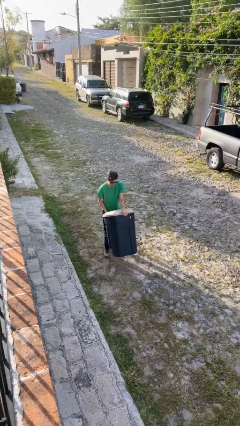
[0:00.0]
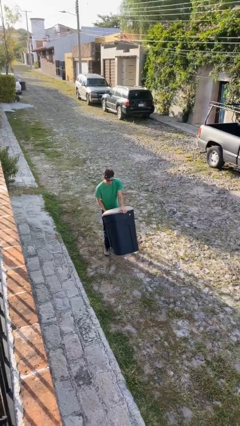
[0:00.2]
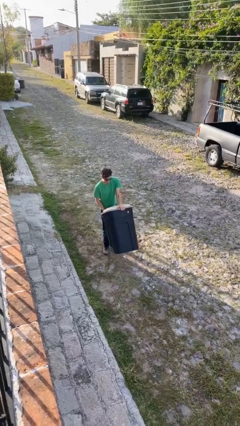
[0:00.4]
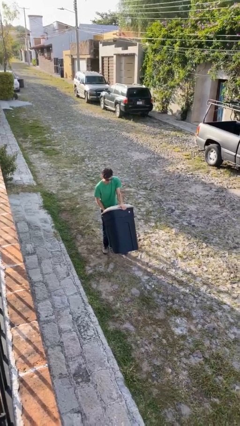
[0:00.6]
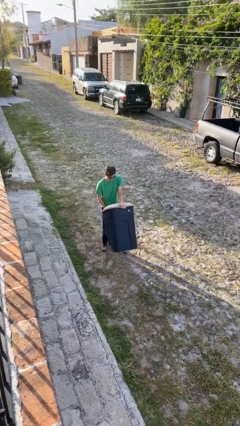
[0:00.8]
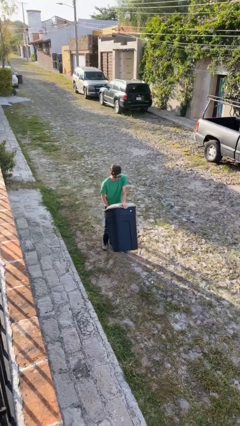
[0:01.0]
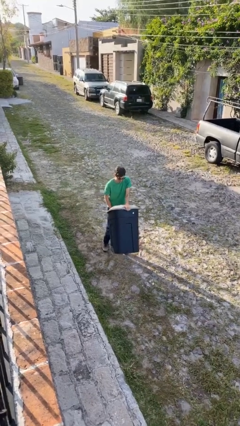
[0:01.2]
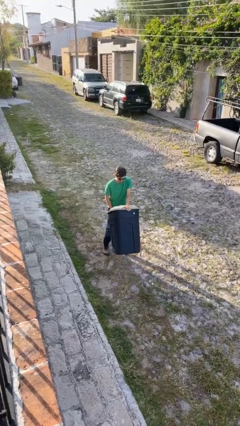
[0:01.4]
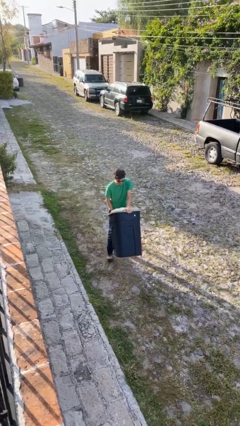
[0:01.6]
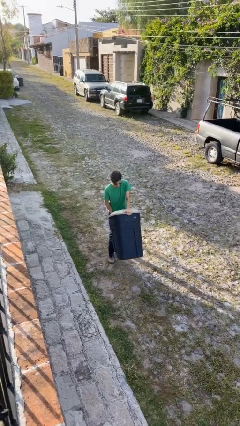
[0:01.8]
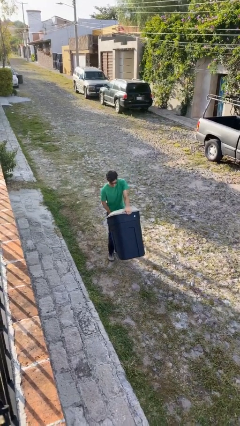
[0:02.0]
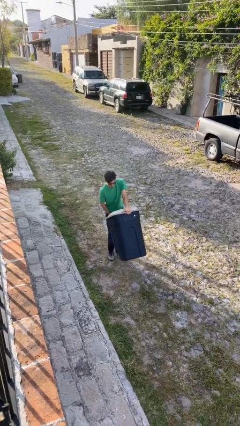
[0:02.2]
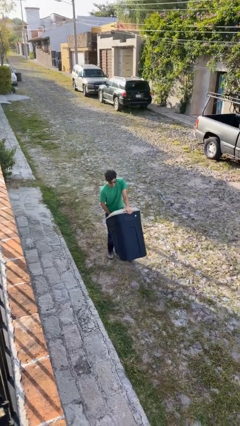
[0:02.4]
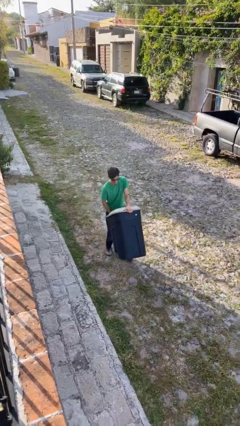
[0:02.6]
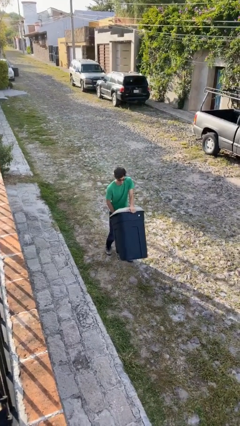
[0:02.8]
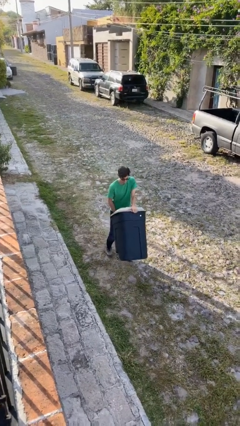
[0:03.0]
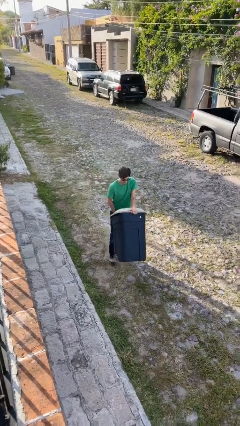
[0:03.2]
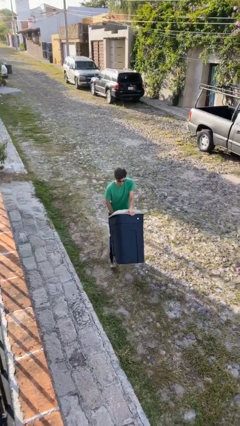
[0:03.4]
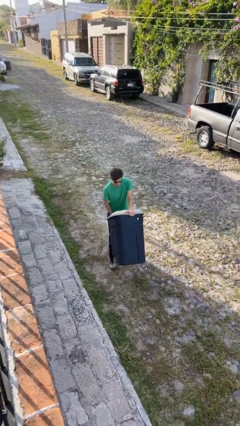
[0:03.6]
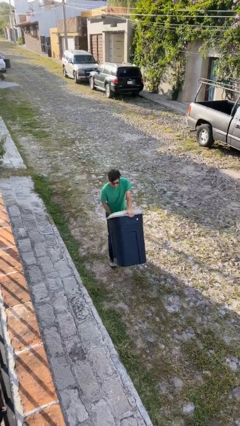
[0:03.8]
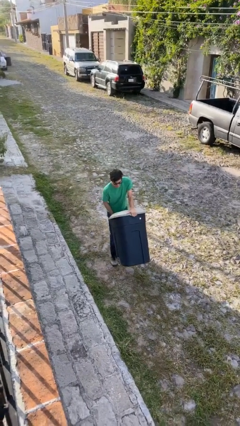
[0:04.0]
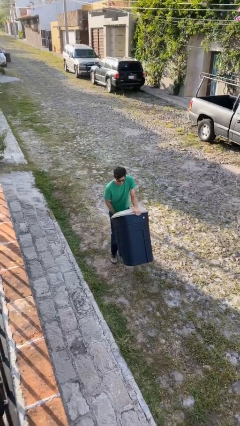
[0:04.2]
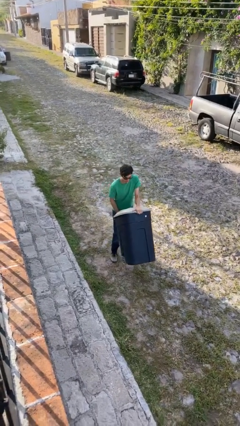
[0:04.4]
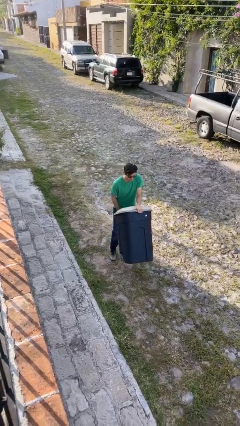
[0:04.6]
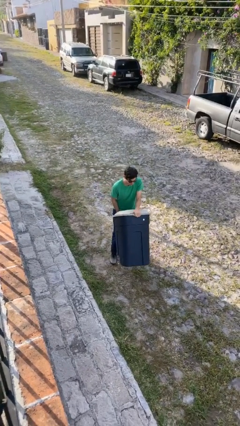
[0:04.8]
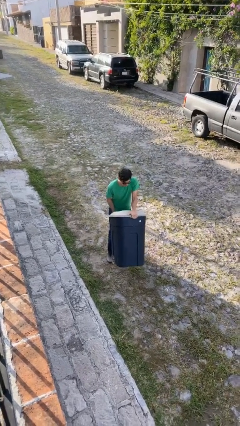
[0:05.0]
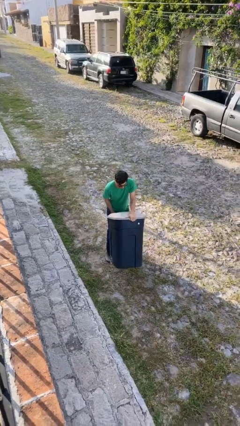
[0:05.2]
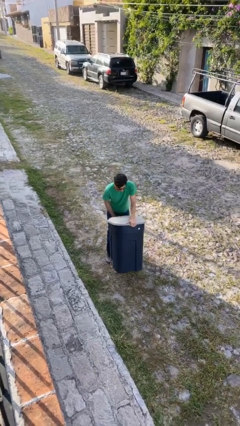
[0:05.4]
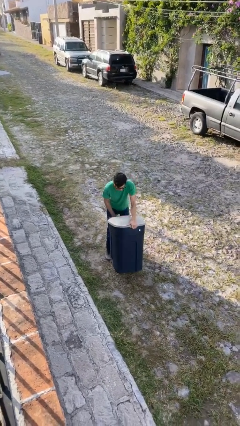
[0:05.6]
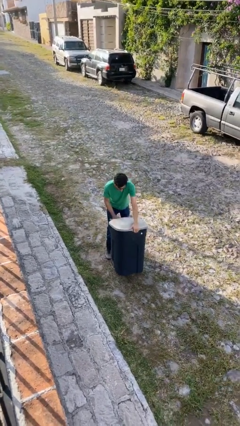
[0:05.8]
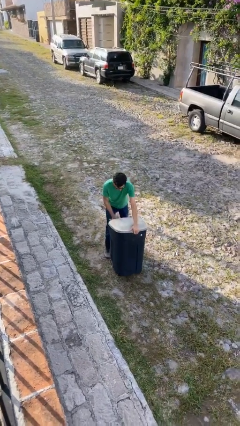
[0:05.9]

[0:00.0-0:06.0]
person carries heavy object

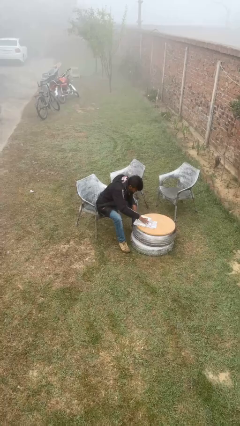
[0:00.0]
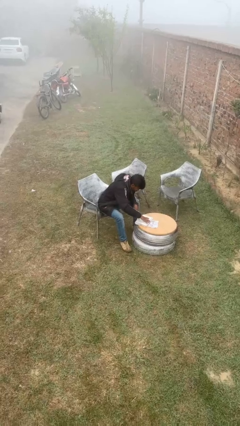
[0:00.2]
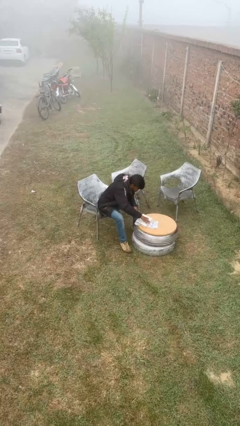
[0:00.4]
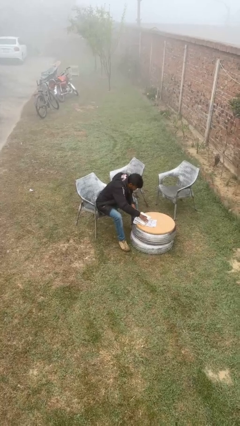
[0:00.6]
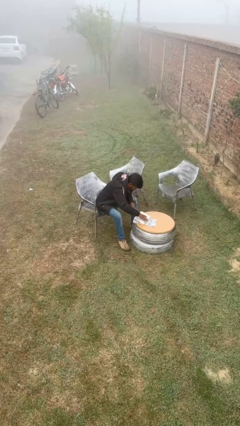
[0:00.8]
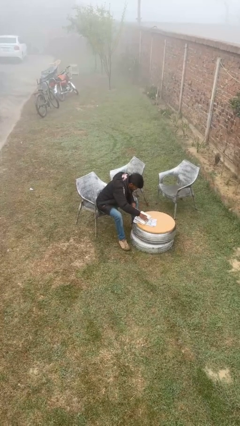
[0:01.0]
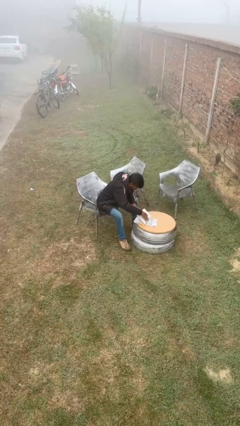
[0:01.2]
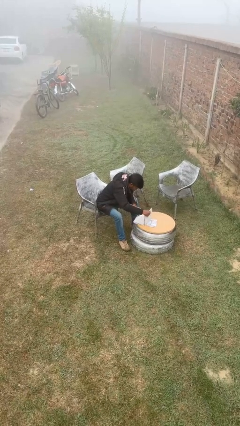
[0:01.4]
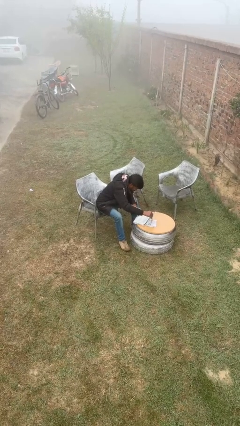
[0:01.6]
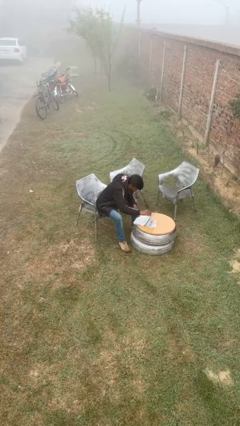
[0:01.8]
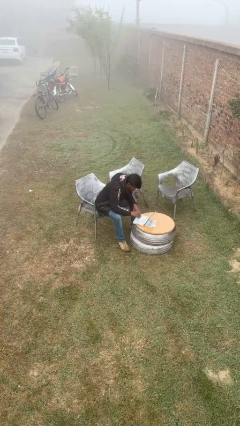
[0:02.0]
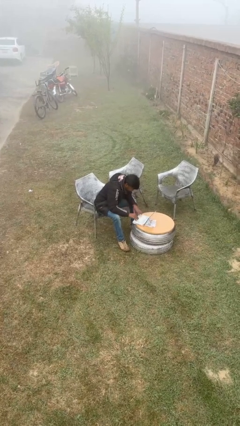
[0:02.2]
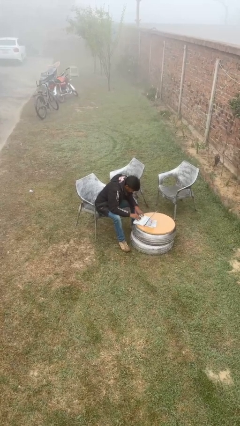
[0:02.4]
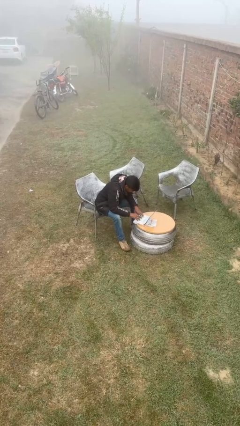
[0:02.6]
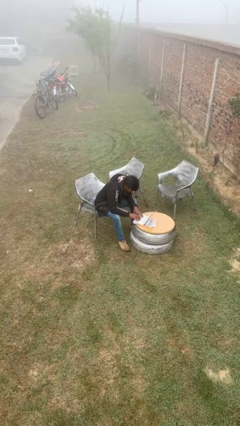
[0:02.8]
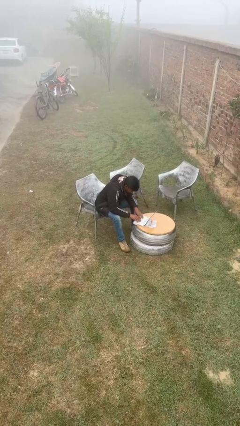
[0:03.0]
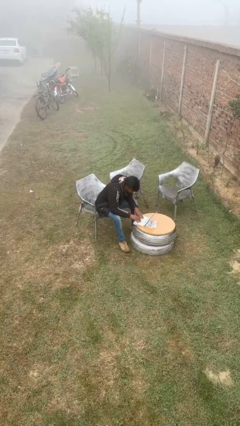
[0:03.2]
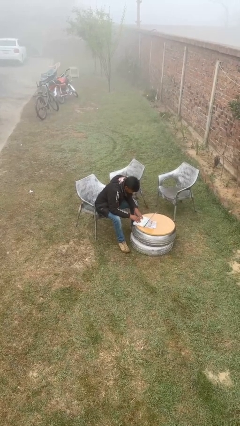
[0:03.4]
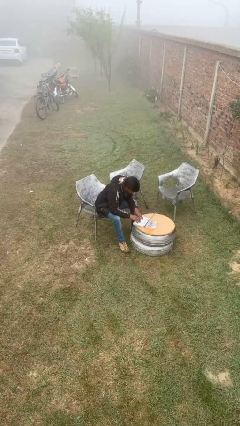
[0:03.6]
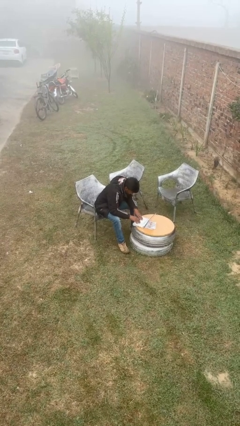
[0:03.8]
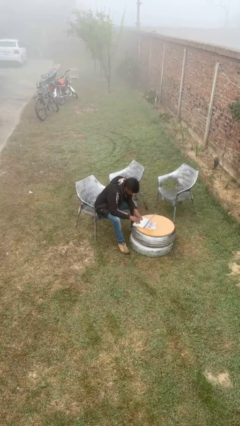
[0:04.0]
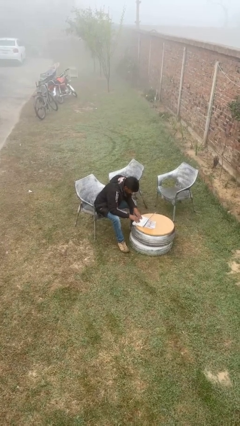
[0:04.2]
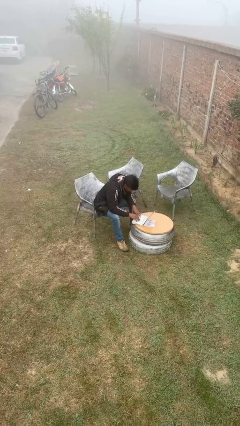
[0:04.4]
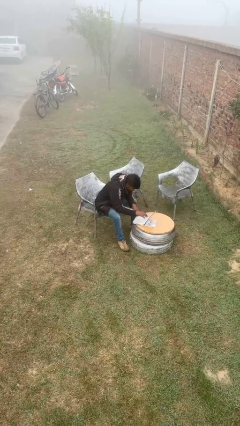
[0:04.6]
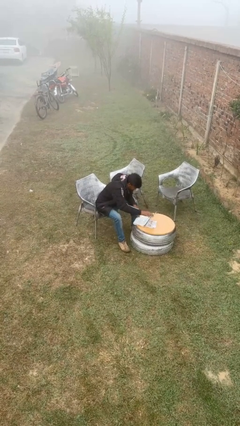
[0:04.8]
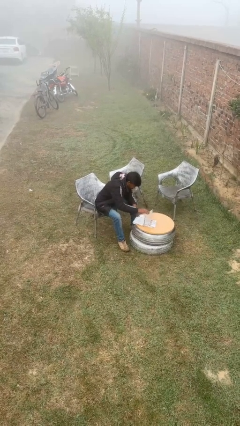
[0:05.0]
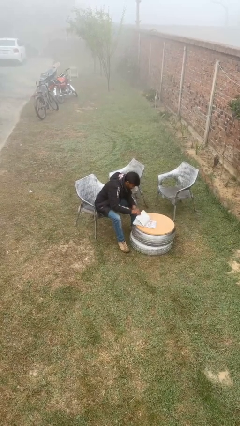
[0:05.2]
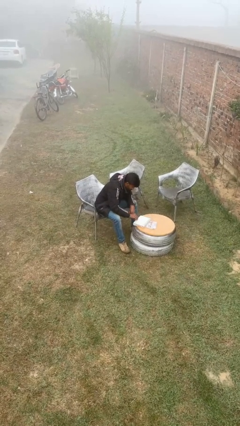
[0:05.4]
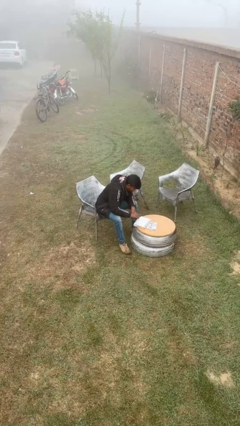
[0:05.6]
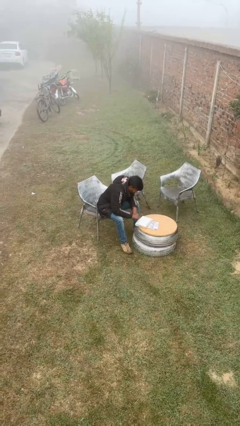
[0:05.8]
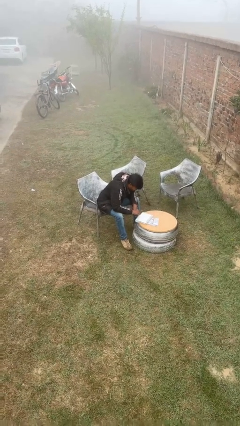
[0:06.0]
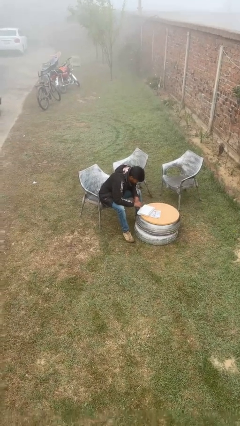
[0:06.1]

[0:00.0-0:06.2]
person interacts with laptop

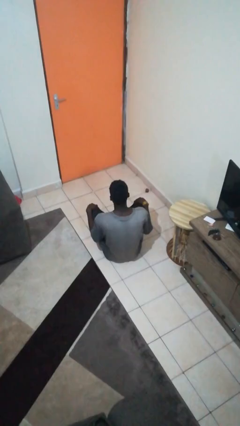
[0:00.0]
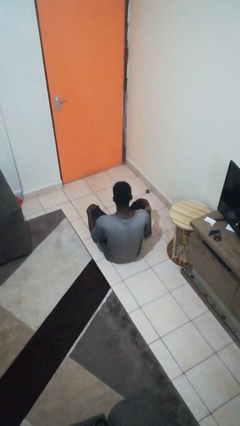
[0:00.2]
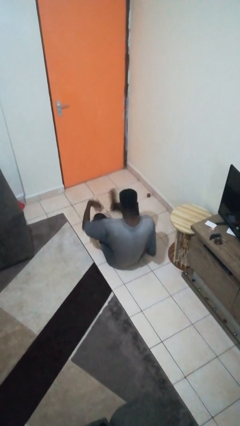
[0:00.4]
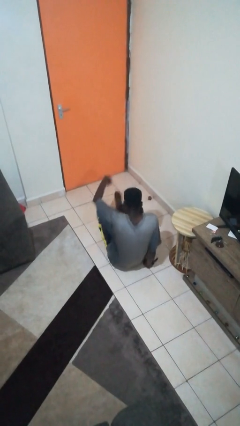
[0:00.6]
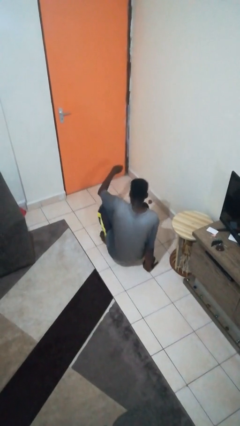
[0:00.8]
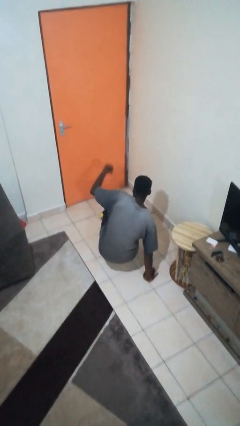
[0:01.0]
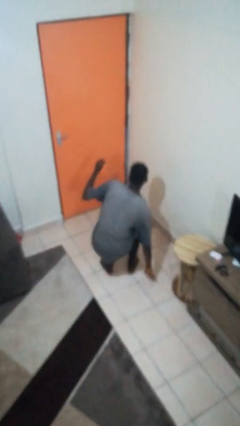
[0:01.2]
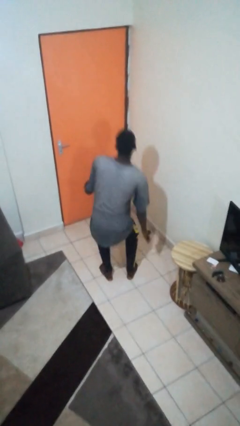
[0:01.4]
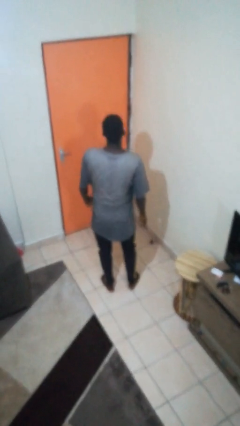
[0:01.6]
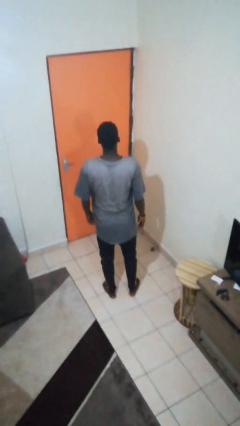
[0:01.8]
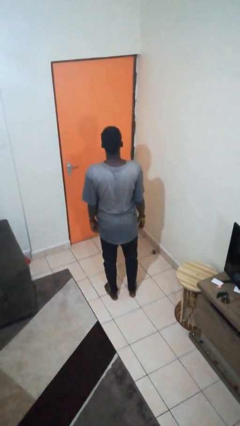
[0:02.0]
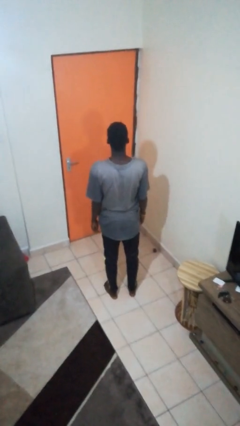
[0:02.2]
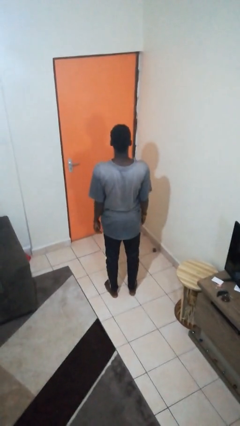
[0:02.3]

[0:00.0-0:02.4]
person stands up from floor

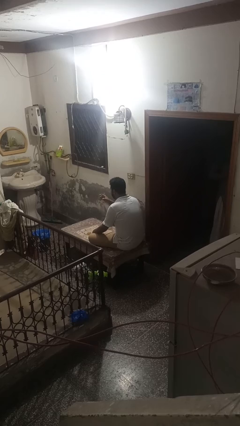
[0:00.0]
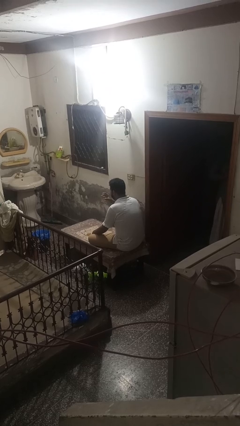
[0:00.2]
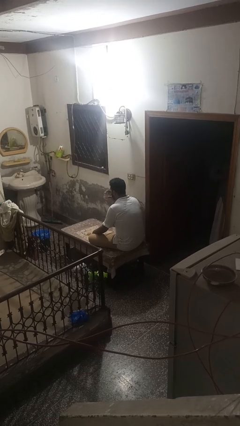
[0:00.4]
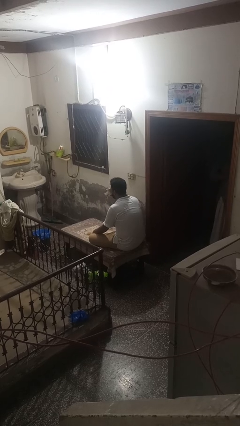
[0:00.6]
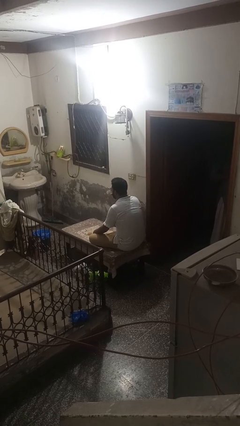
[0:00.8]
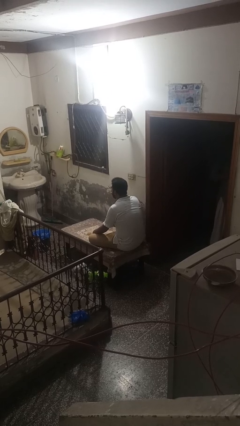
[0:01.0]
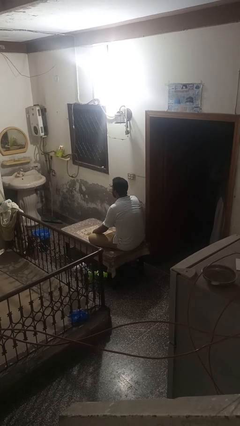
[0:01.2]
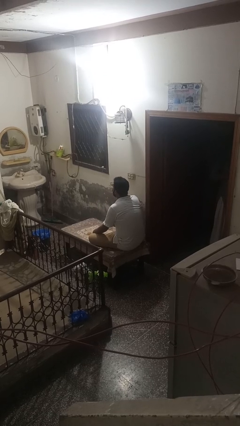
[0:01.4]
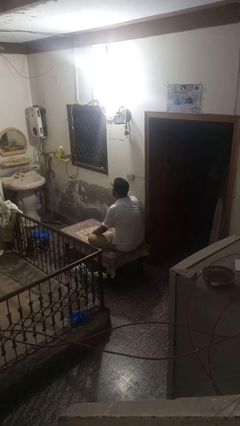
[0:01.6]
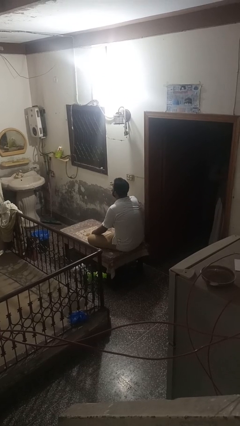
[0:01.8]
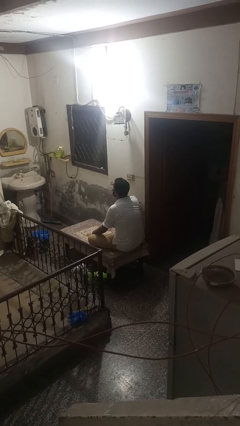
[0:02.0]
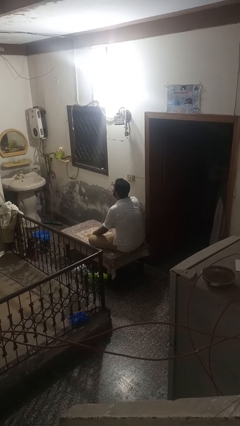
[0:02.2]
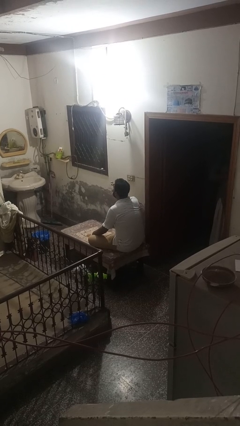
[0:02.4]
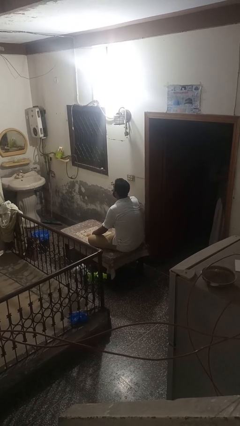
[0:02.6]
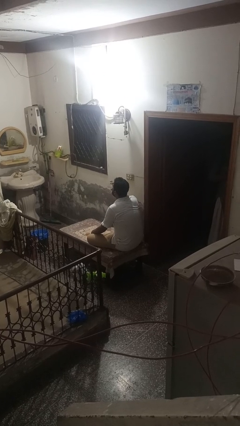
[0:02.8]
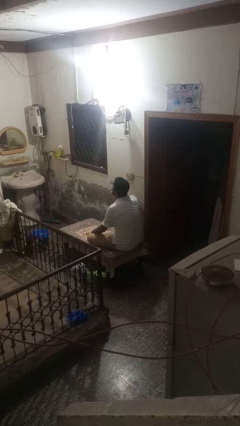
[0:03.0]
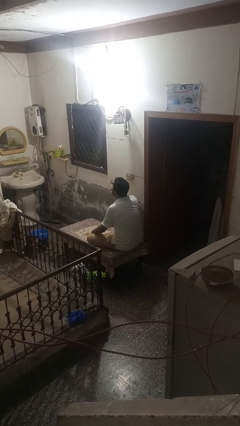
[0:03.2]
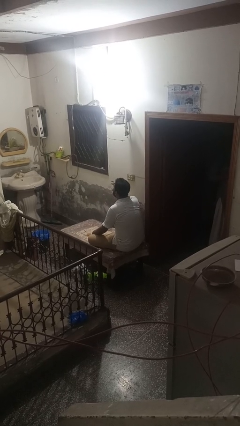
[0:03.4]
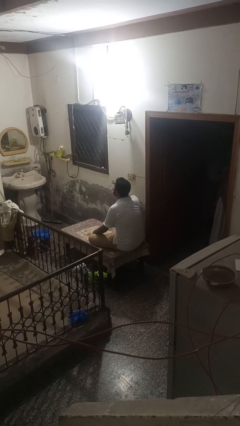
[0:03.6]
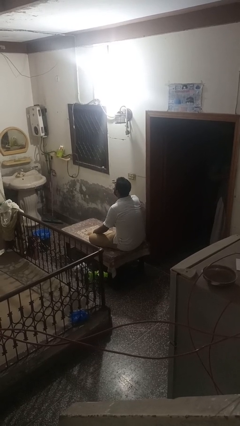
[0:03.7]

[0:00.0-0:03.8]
person drinks from shotglass
